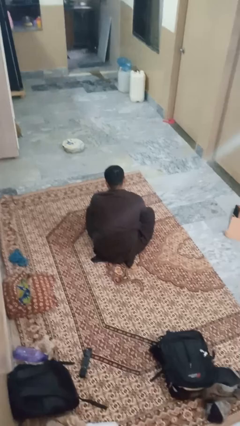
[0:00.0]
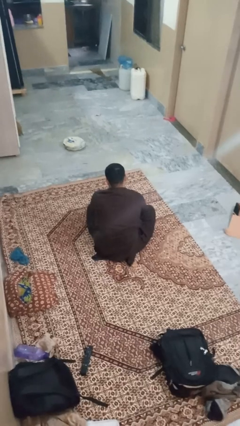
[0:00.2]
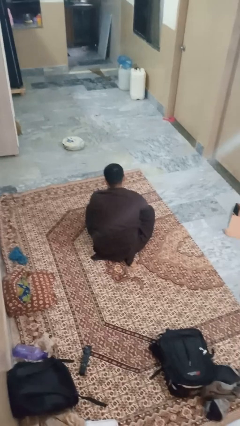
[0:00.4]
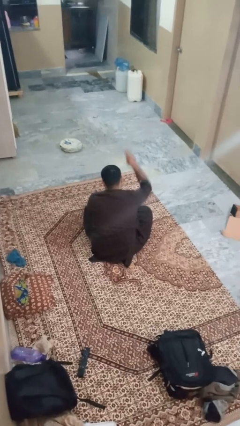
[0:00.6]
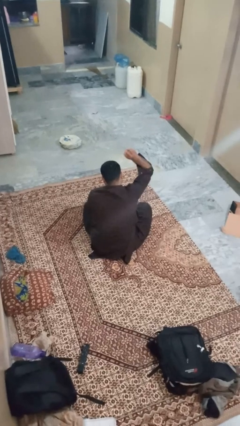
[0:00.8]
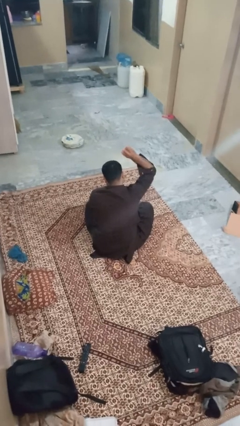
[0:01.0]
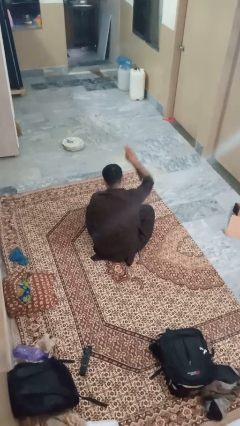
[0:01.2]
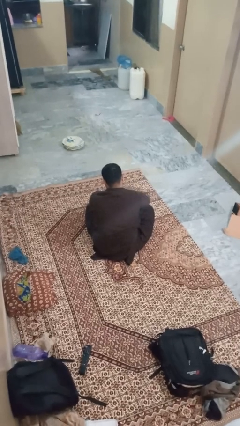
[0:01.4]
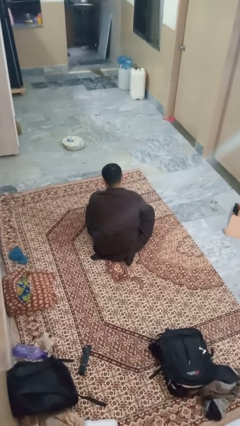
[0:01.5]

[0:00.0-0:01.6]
person gestures number three

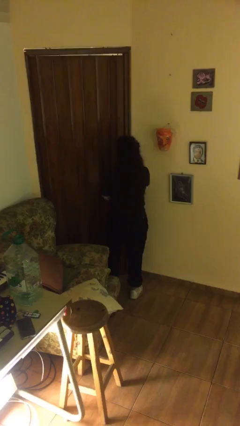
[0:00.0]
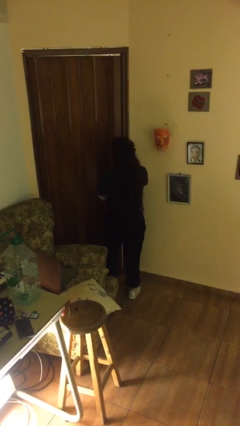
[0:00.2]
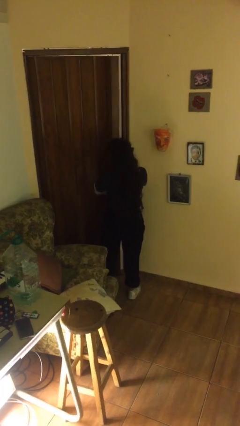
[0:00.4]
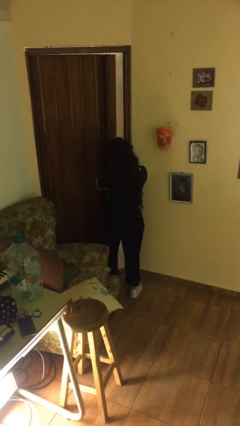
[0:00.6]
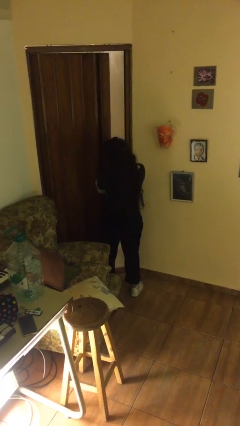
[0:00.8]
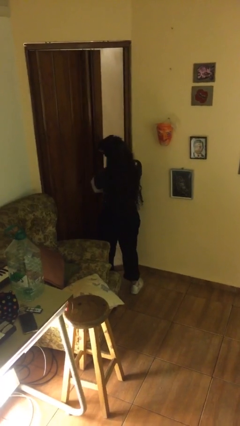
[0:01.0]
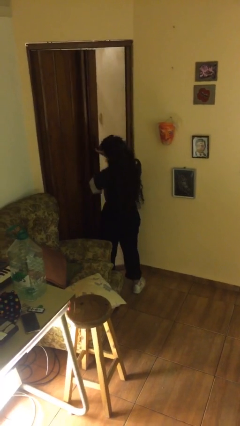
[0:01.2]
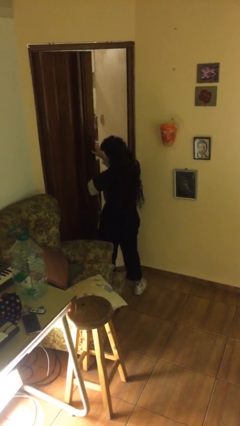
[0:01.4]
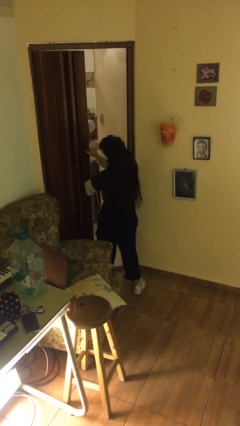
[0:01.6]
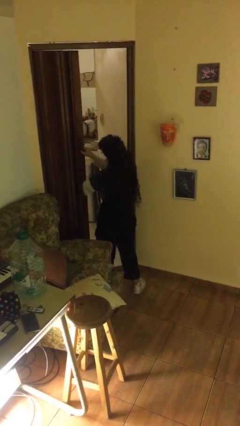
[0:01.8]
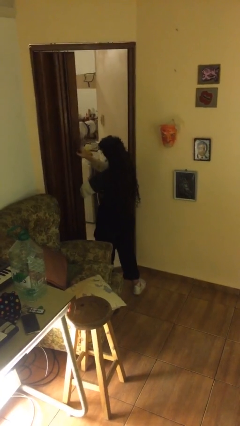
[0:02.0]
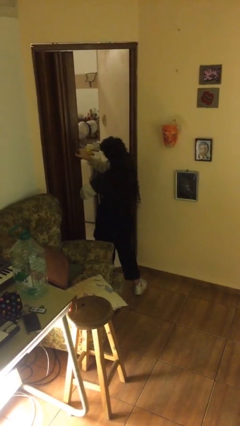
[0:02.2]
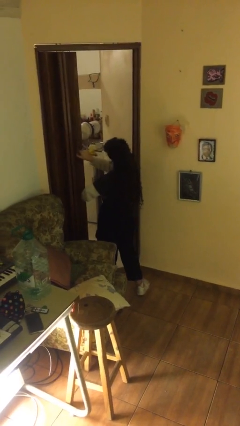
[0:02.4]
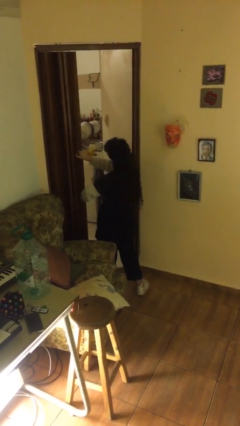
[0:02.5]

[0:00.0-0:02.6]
person opens sliding door

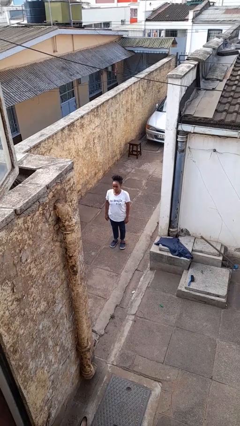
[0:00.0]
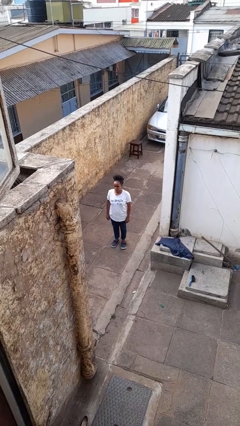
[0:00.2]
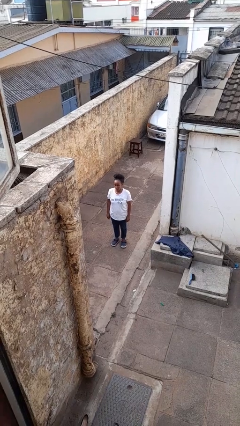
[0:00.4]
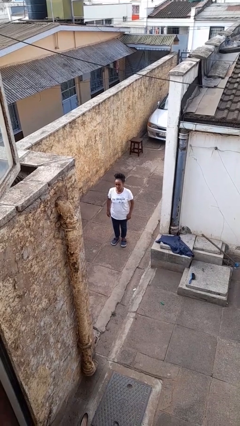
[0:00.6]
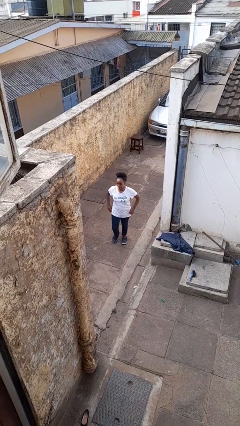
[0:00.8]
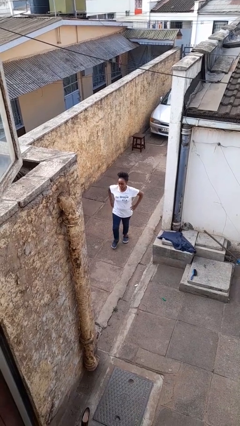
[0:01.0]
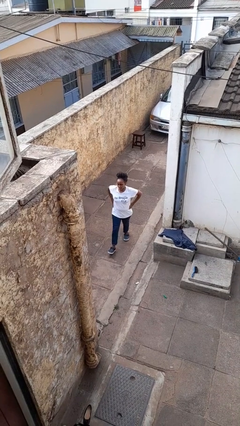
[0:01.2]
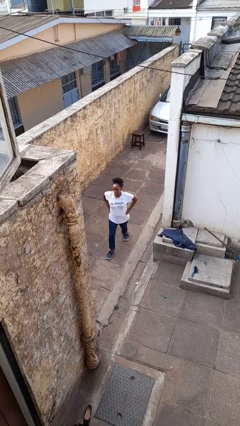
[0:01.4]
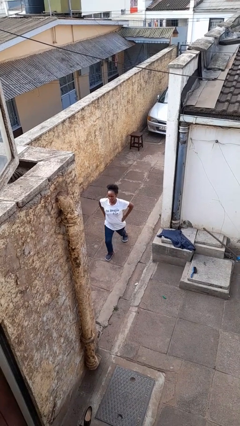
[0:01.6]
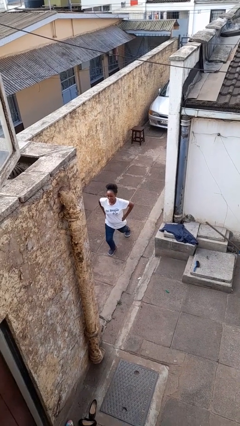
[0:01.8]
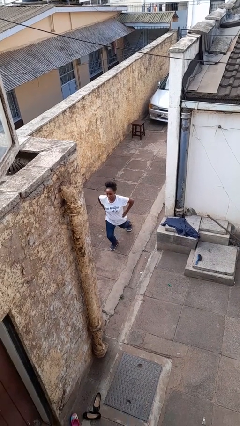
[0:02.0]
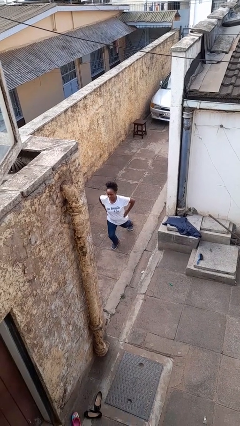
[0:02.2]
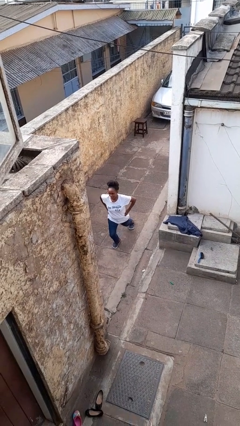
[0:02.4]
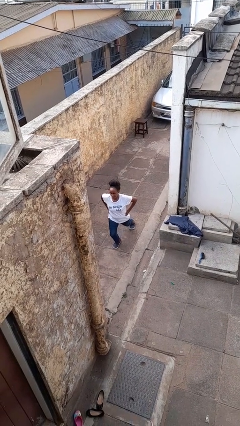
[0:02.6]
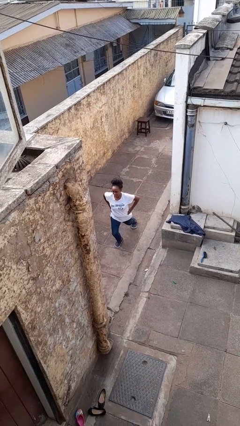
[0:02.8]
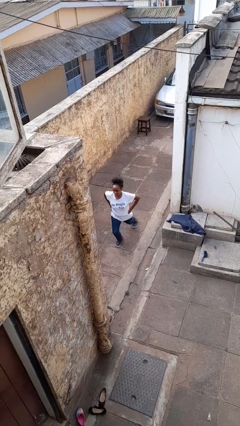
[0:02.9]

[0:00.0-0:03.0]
person exercises with lunges

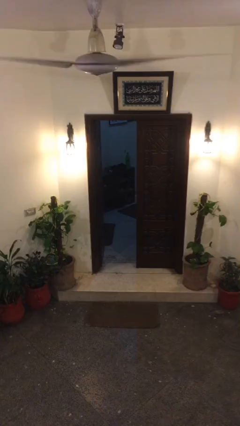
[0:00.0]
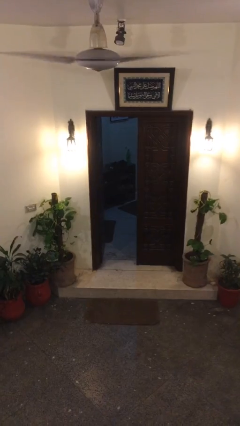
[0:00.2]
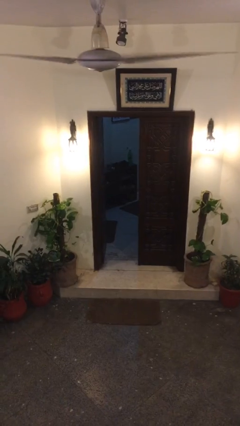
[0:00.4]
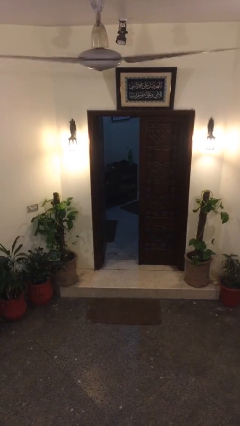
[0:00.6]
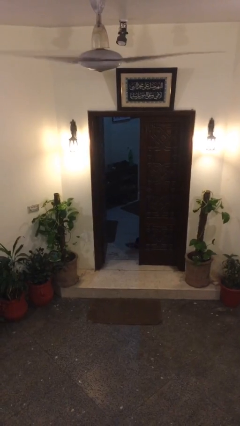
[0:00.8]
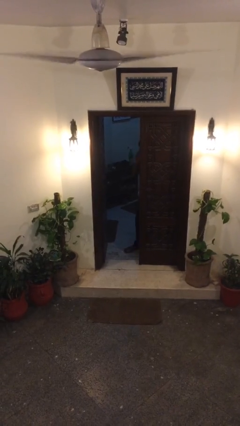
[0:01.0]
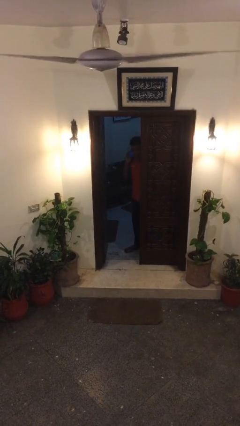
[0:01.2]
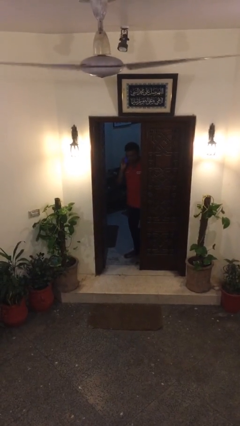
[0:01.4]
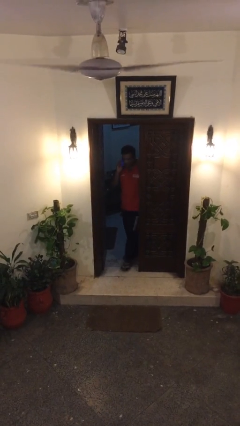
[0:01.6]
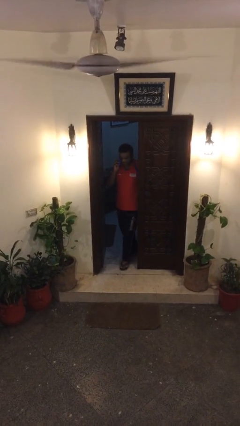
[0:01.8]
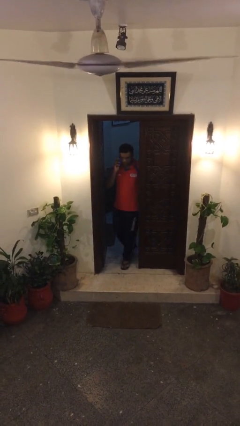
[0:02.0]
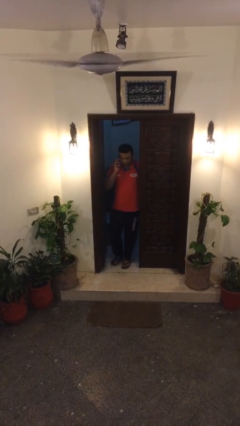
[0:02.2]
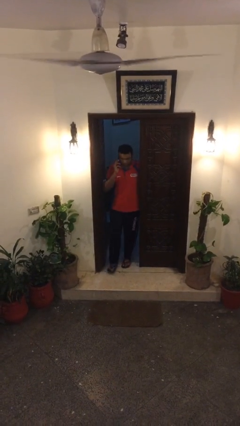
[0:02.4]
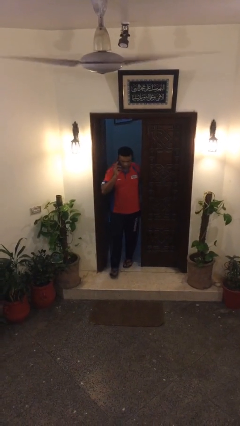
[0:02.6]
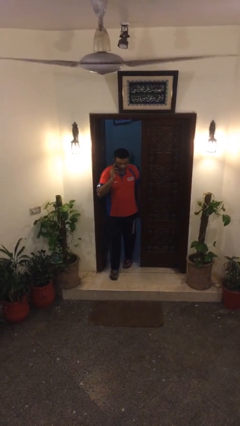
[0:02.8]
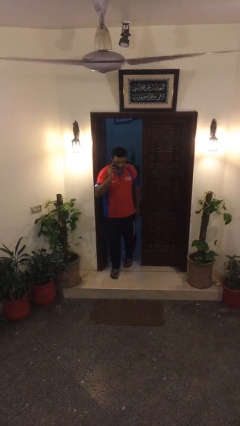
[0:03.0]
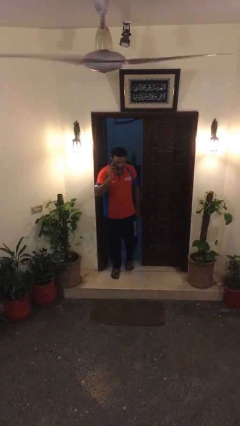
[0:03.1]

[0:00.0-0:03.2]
person enters scene through structure

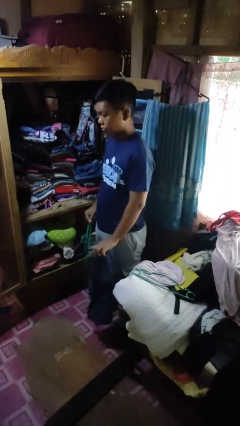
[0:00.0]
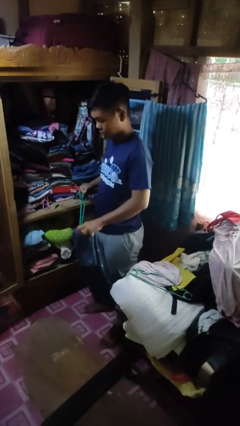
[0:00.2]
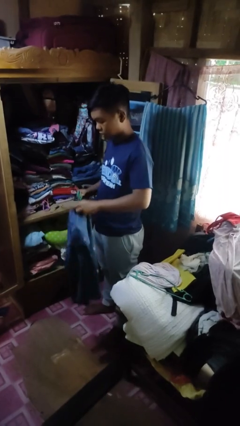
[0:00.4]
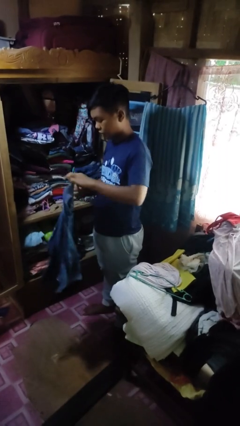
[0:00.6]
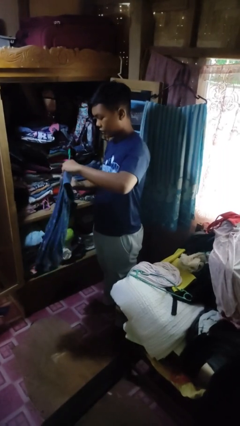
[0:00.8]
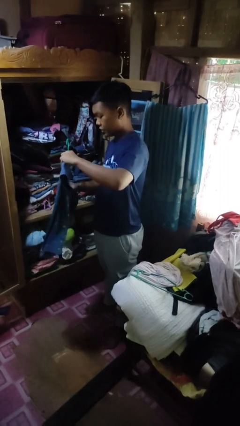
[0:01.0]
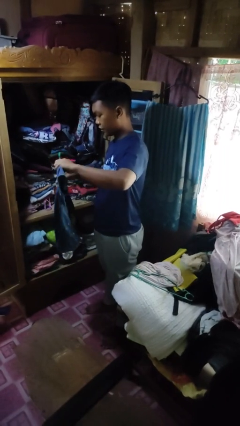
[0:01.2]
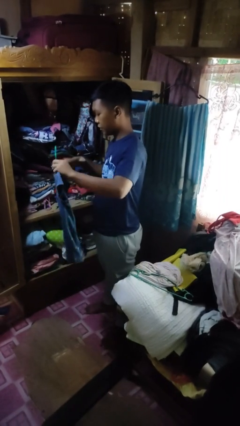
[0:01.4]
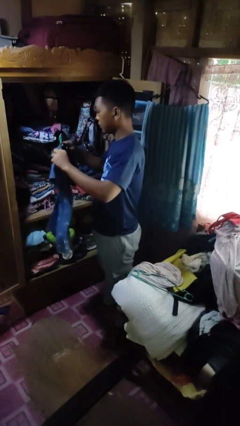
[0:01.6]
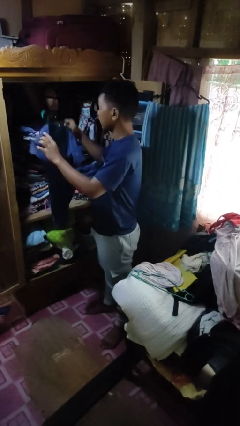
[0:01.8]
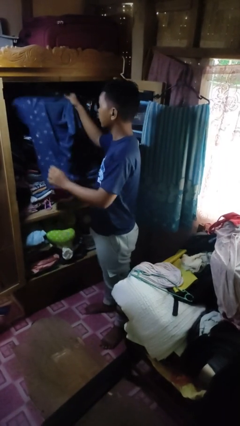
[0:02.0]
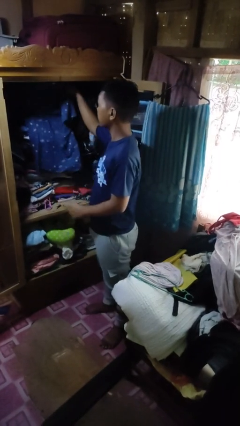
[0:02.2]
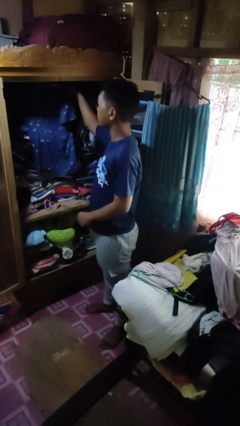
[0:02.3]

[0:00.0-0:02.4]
person puts clothes into closet

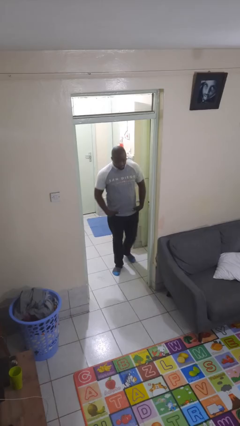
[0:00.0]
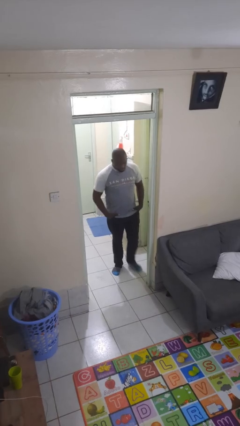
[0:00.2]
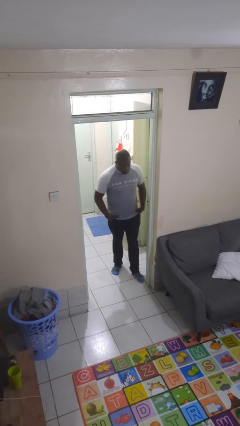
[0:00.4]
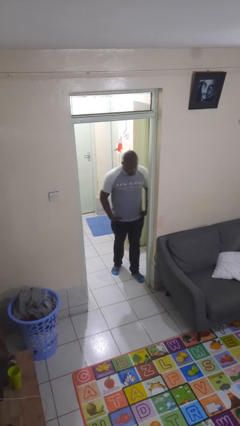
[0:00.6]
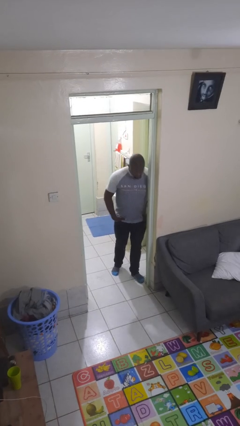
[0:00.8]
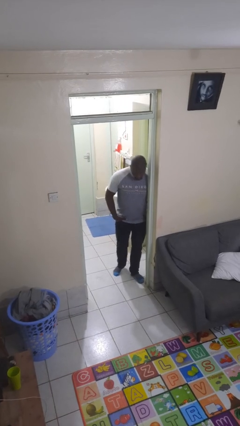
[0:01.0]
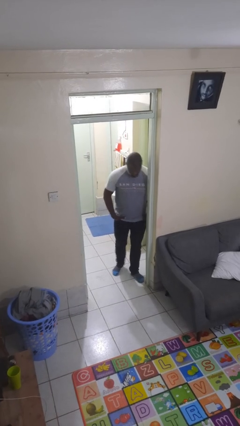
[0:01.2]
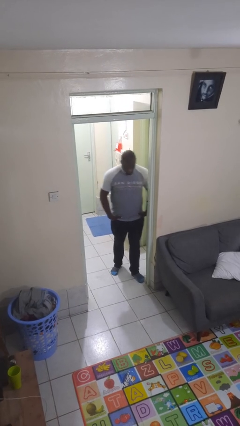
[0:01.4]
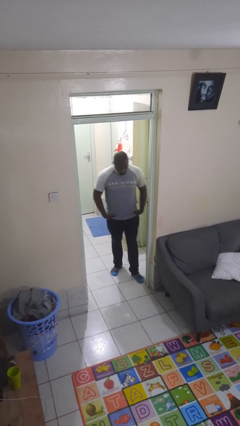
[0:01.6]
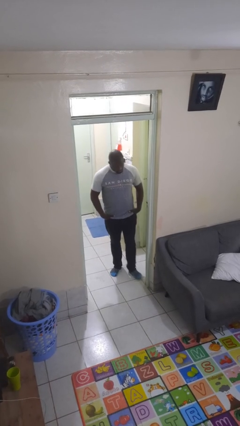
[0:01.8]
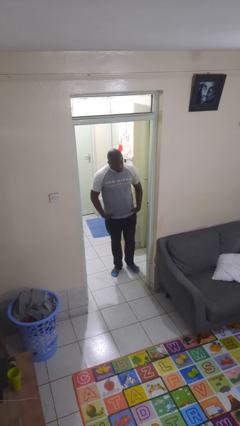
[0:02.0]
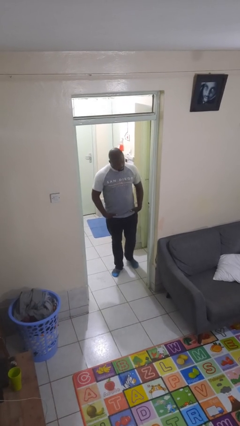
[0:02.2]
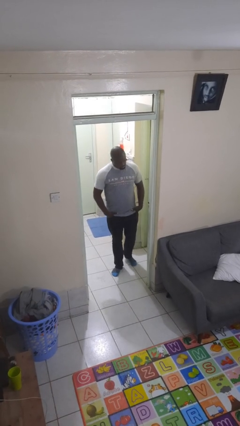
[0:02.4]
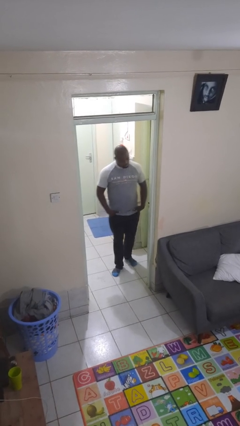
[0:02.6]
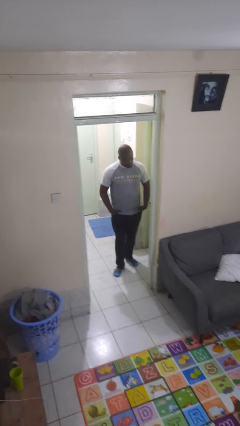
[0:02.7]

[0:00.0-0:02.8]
person bumps into wall

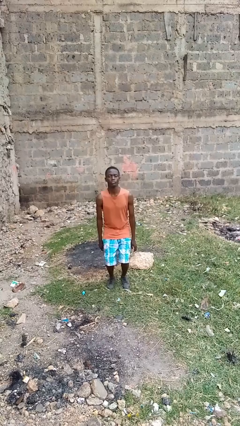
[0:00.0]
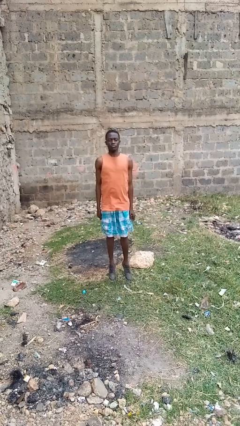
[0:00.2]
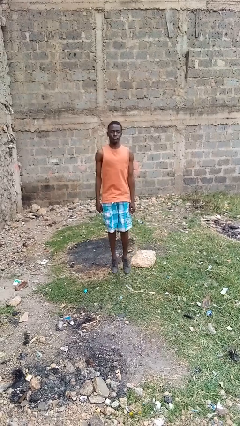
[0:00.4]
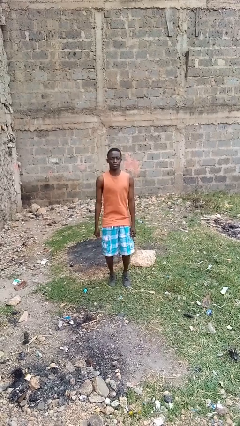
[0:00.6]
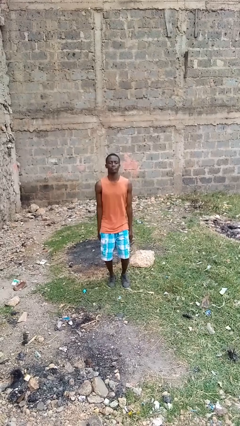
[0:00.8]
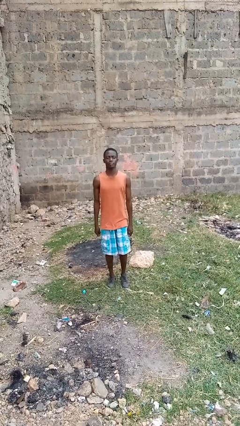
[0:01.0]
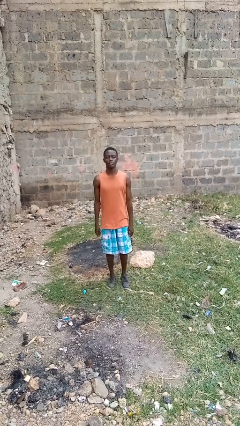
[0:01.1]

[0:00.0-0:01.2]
person jumps
